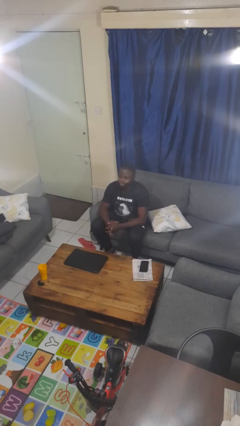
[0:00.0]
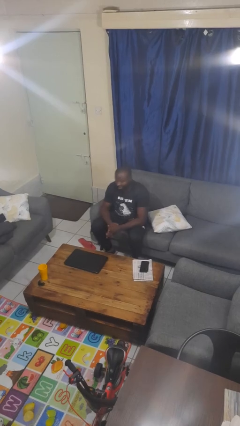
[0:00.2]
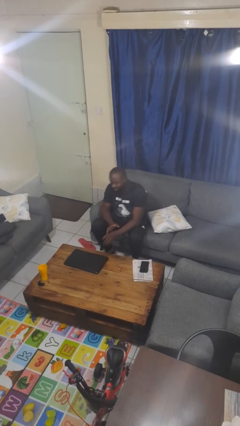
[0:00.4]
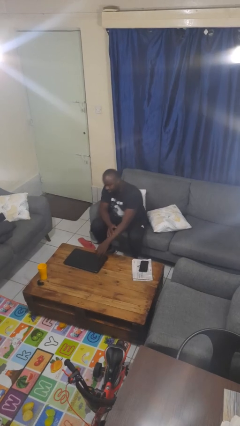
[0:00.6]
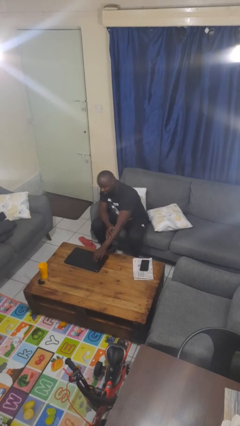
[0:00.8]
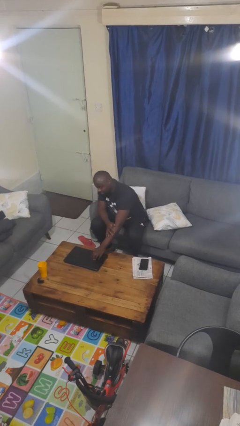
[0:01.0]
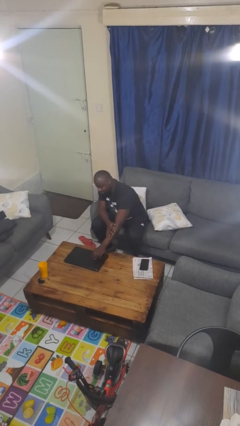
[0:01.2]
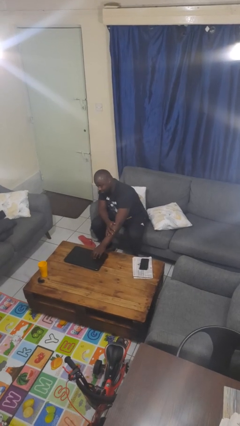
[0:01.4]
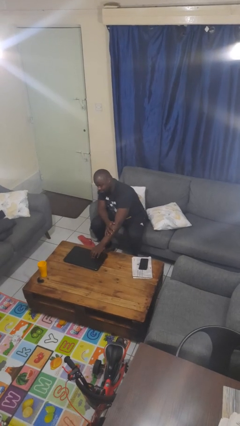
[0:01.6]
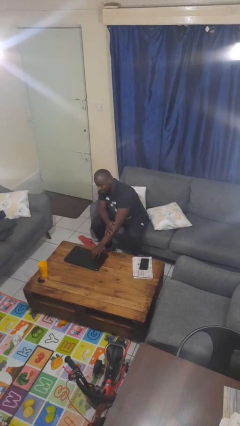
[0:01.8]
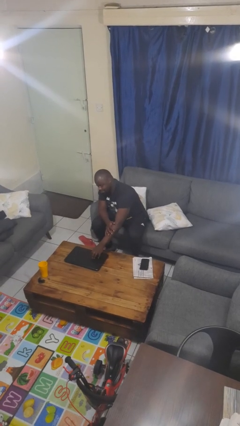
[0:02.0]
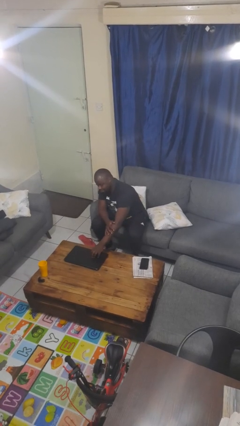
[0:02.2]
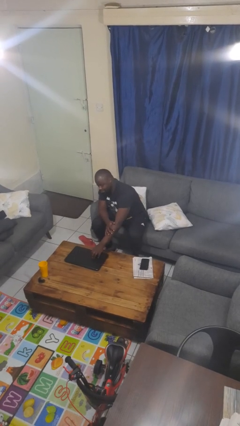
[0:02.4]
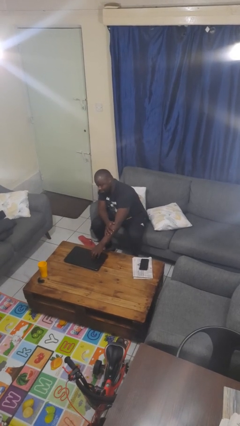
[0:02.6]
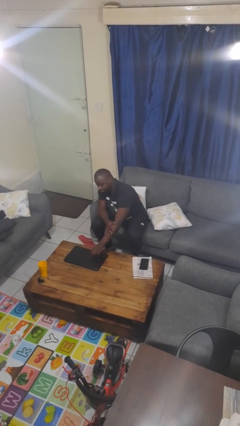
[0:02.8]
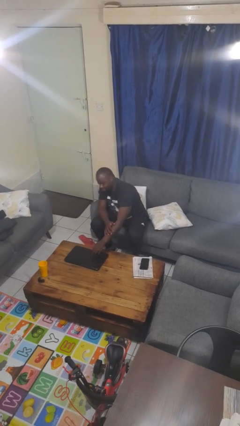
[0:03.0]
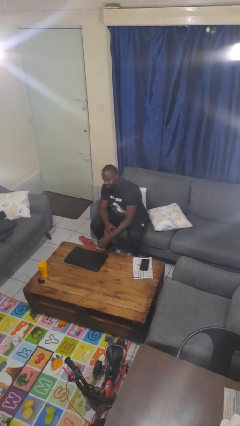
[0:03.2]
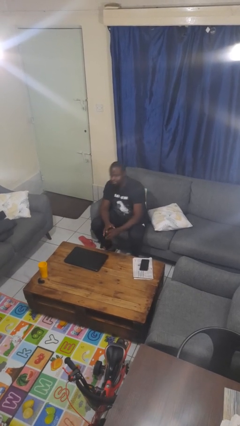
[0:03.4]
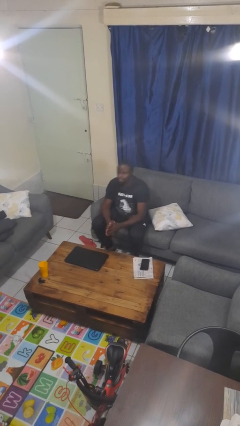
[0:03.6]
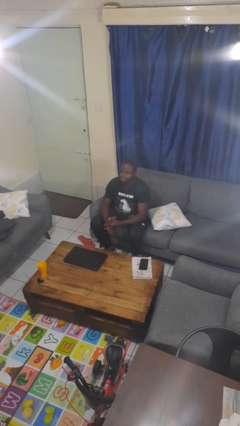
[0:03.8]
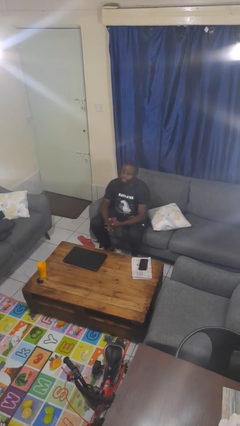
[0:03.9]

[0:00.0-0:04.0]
person taps object with finger

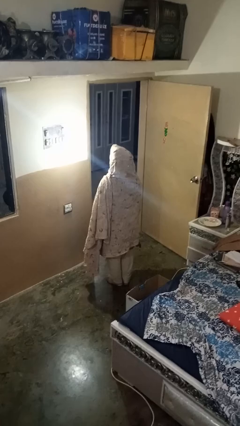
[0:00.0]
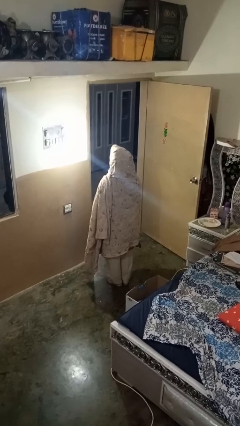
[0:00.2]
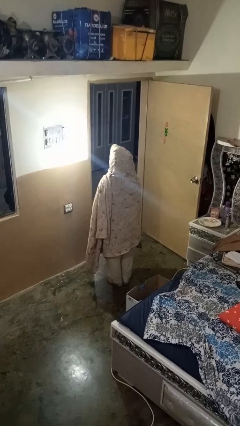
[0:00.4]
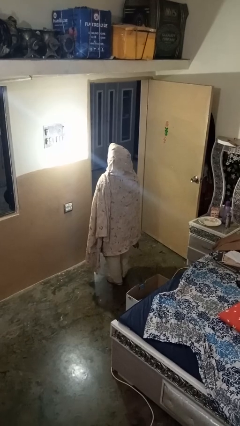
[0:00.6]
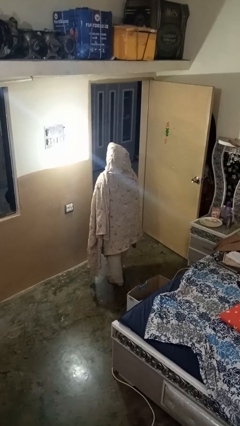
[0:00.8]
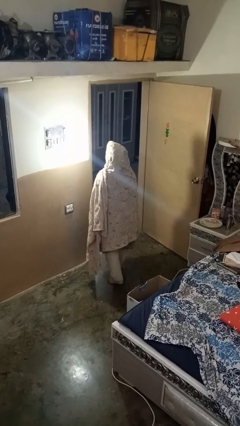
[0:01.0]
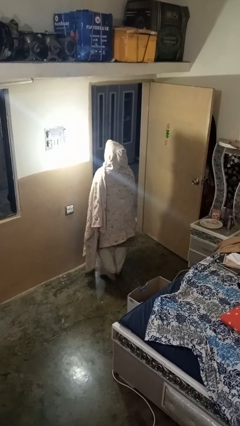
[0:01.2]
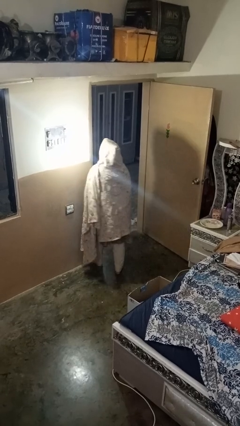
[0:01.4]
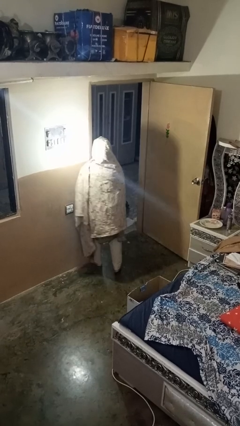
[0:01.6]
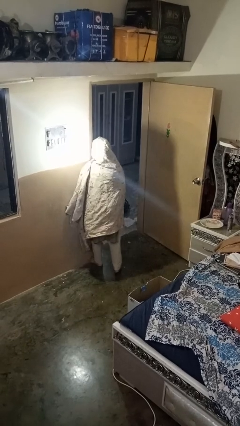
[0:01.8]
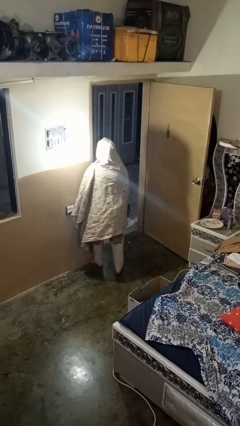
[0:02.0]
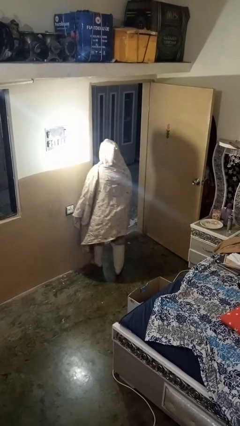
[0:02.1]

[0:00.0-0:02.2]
person bumps into wall

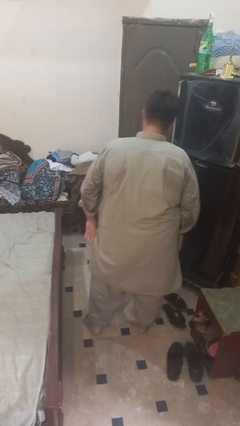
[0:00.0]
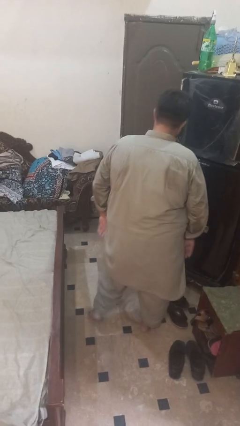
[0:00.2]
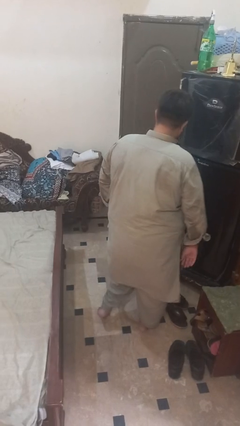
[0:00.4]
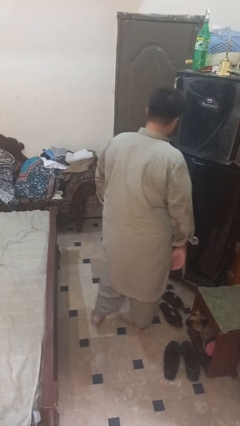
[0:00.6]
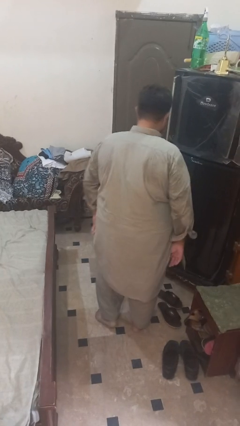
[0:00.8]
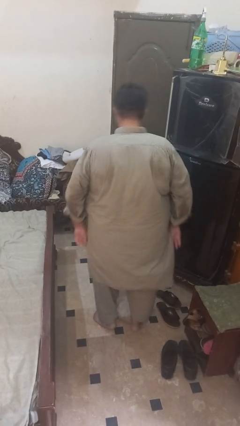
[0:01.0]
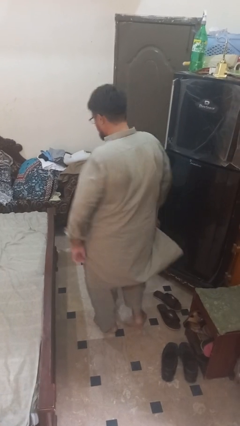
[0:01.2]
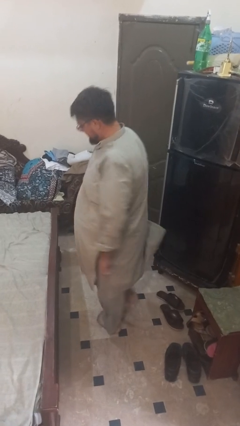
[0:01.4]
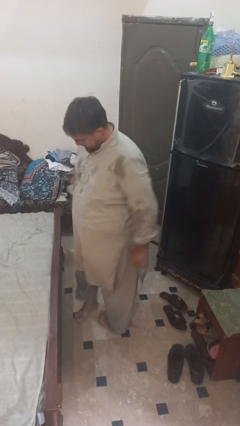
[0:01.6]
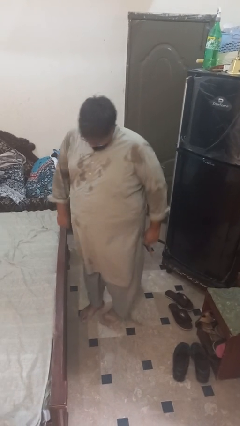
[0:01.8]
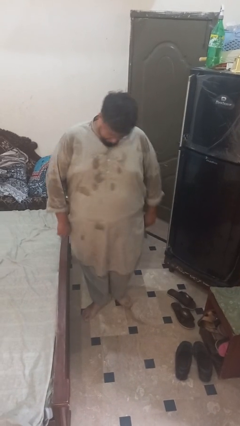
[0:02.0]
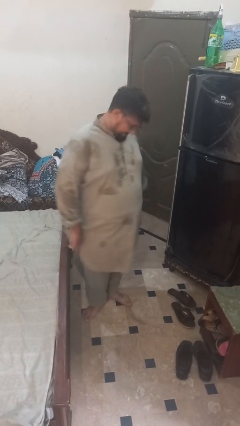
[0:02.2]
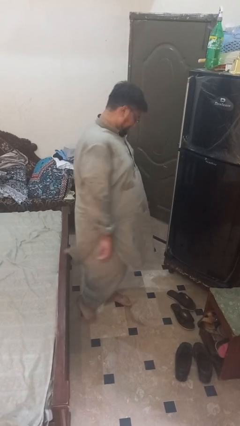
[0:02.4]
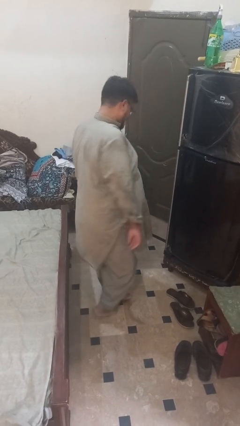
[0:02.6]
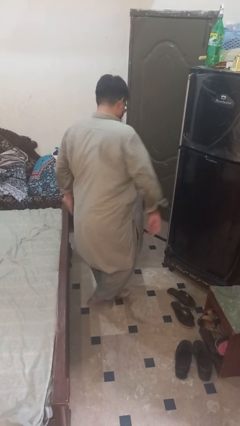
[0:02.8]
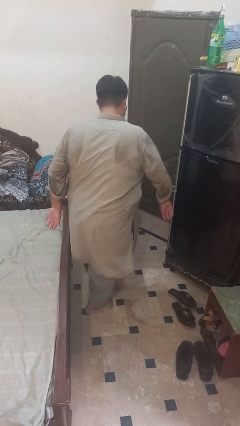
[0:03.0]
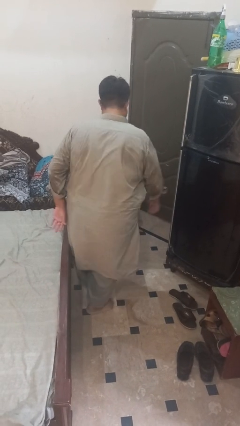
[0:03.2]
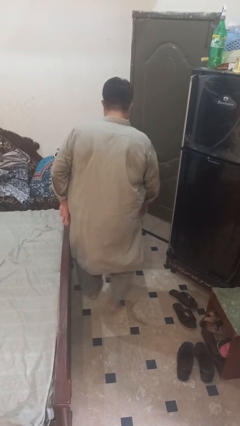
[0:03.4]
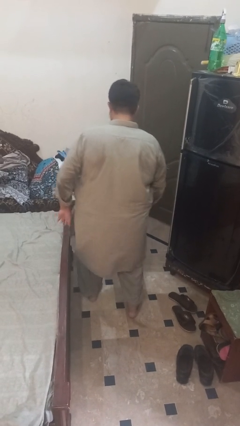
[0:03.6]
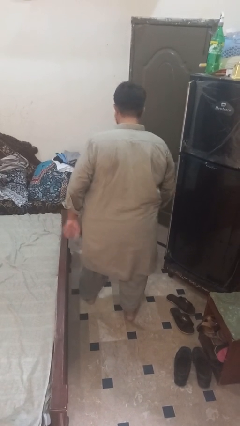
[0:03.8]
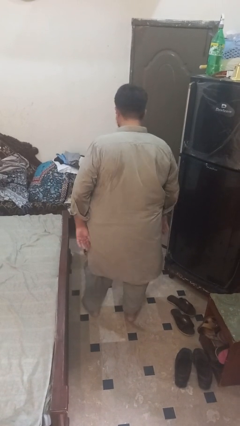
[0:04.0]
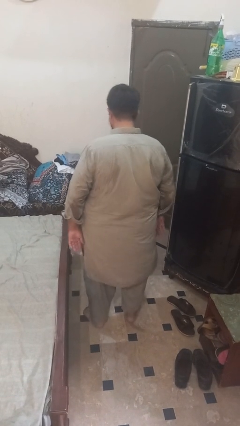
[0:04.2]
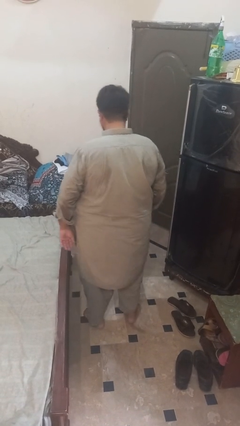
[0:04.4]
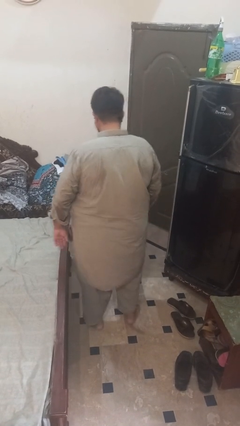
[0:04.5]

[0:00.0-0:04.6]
person twirls

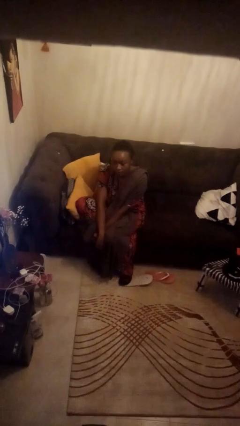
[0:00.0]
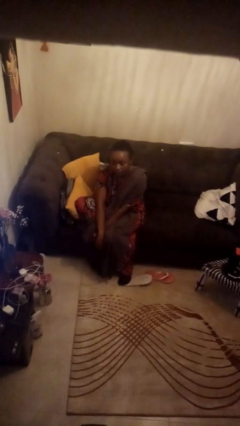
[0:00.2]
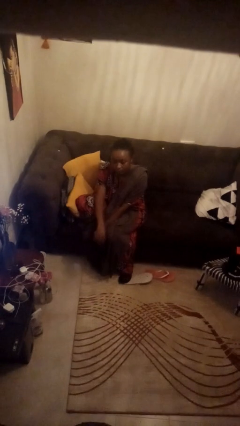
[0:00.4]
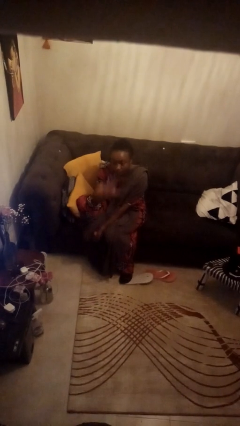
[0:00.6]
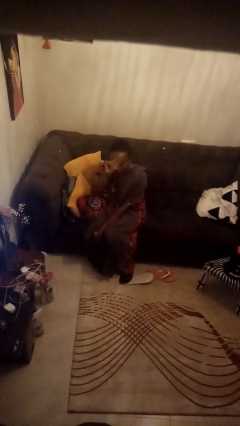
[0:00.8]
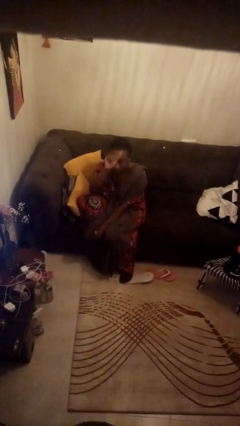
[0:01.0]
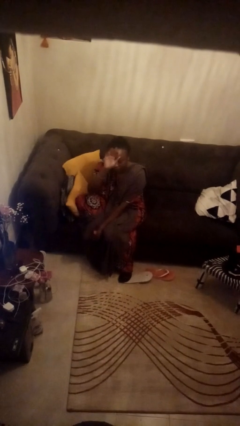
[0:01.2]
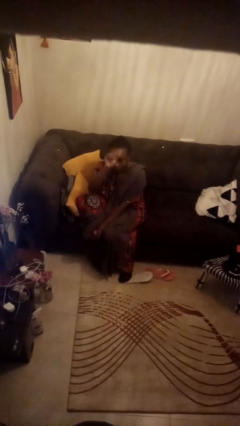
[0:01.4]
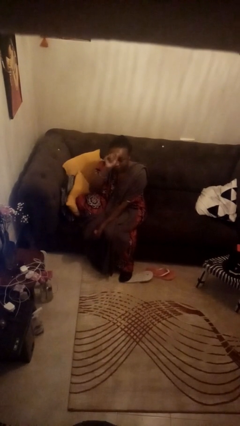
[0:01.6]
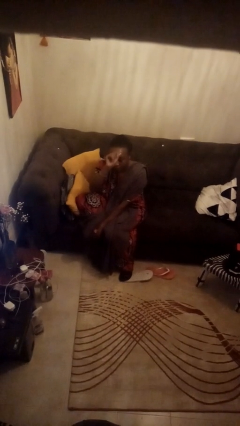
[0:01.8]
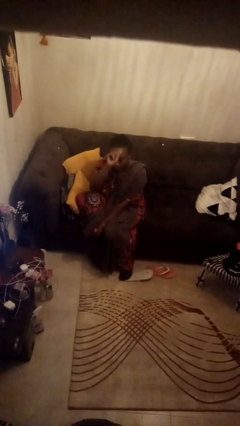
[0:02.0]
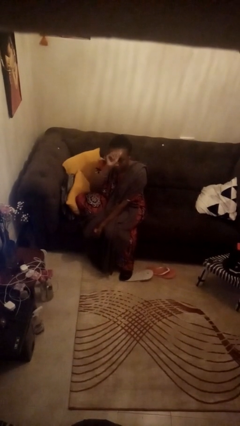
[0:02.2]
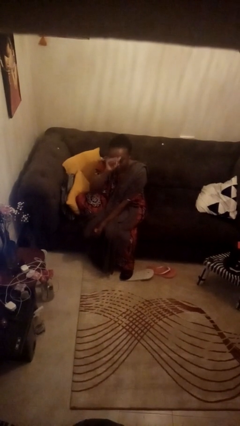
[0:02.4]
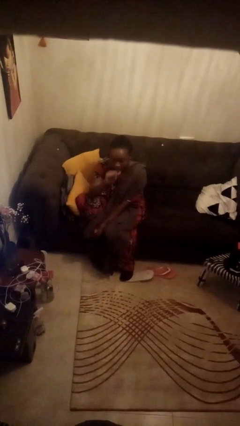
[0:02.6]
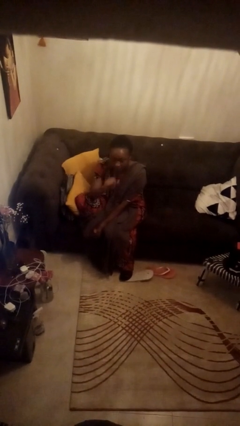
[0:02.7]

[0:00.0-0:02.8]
person gestures come here

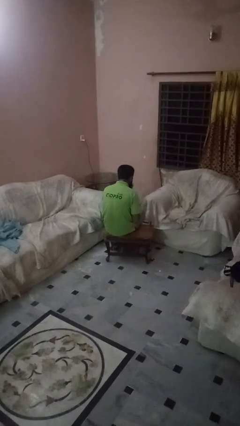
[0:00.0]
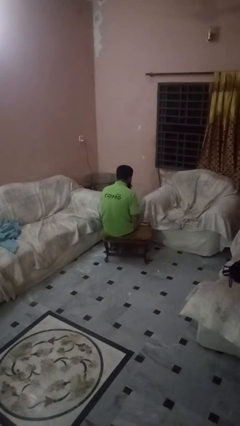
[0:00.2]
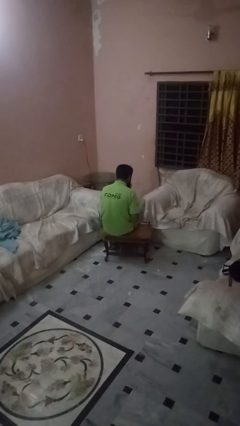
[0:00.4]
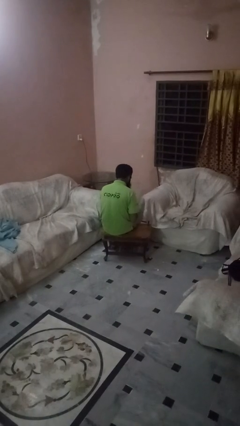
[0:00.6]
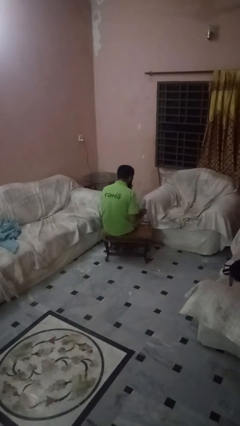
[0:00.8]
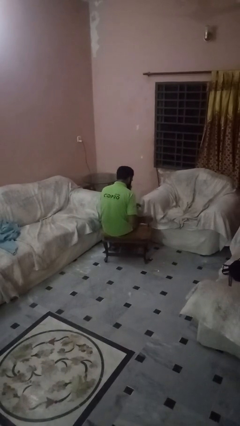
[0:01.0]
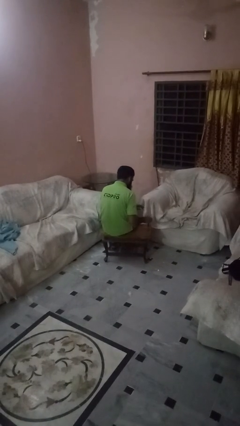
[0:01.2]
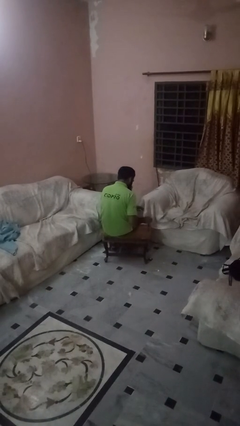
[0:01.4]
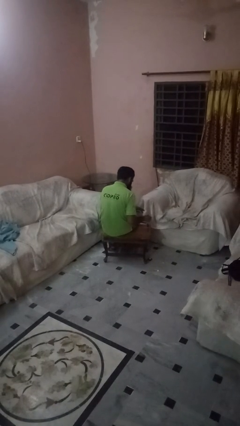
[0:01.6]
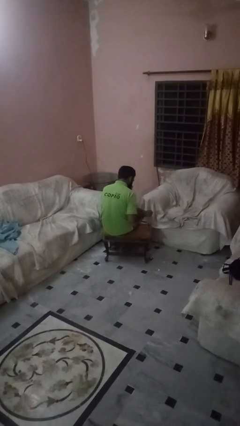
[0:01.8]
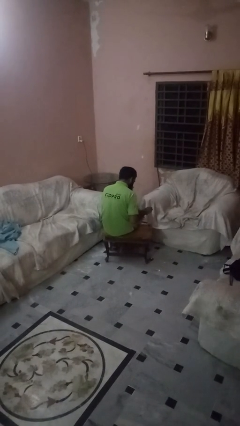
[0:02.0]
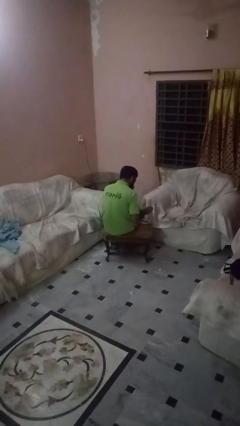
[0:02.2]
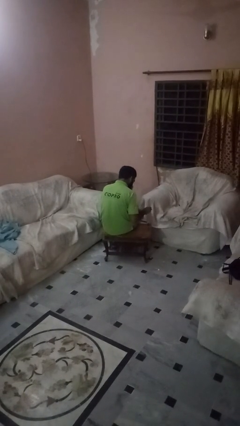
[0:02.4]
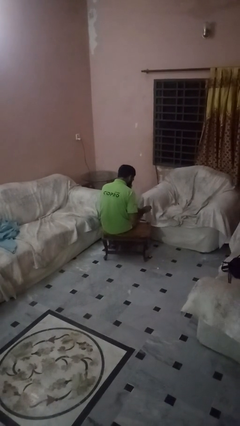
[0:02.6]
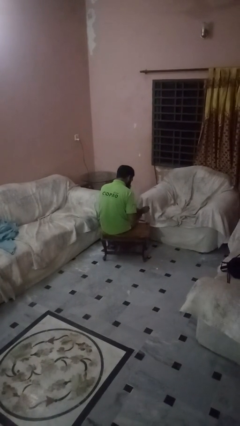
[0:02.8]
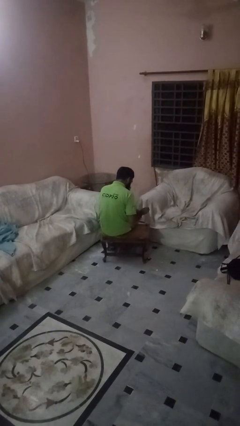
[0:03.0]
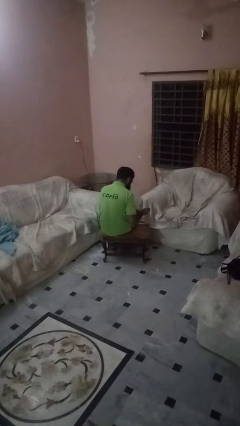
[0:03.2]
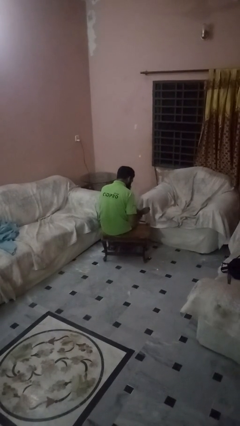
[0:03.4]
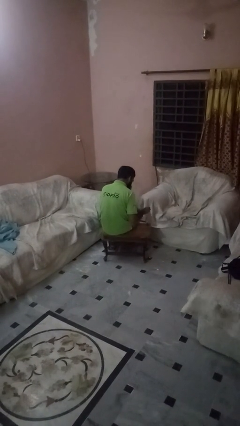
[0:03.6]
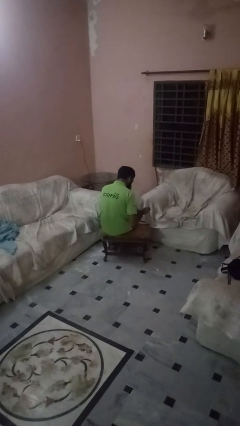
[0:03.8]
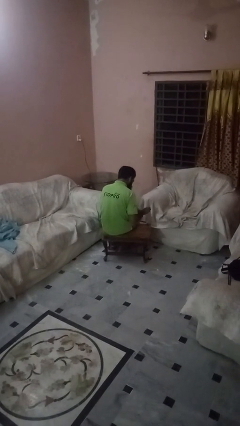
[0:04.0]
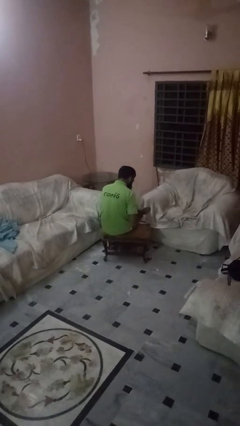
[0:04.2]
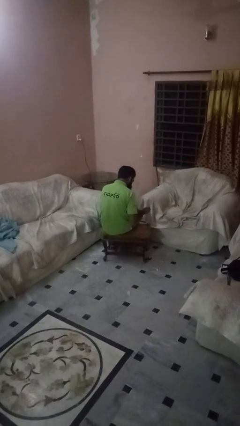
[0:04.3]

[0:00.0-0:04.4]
person paints fingernails
